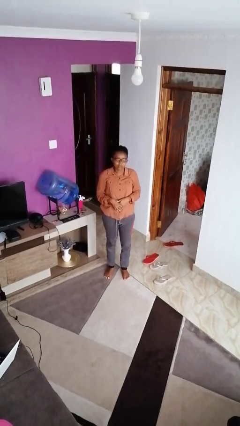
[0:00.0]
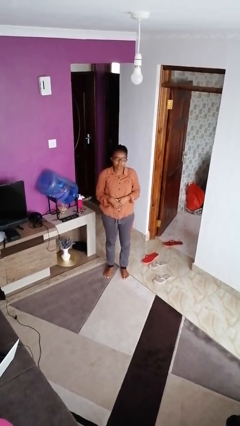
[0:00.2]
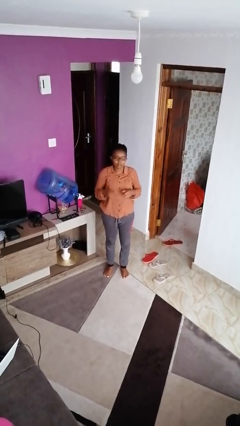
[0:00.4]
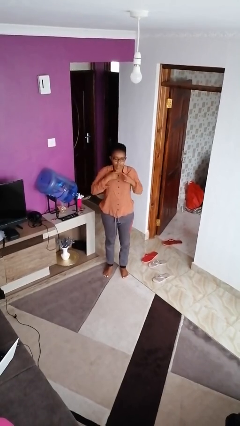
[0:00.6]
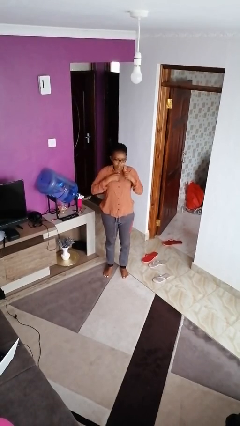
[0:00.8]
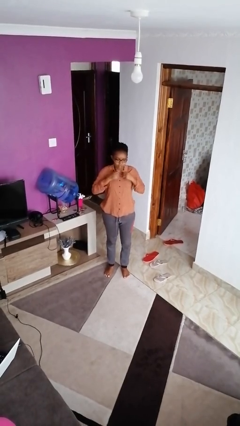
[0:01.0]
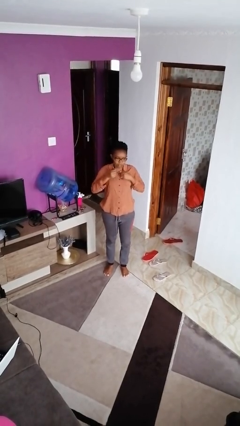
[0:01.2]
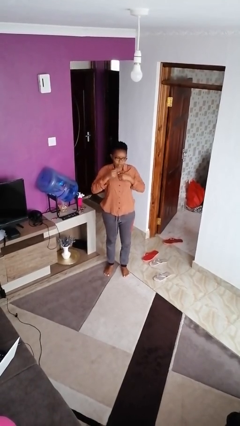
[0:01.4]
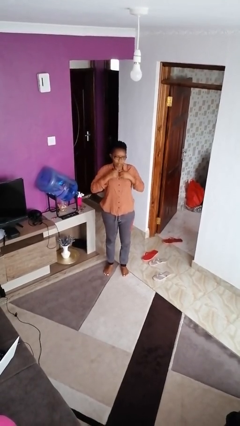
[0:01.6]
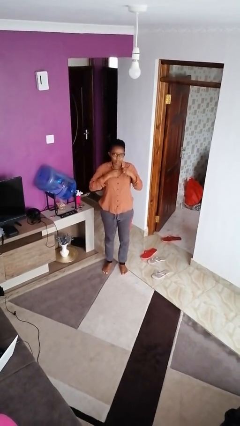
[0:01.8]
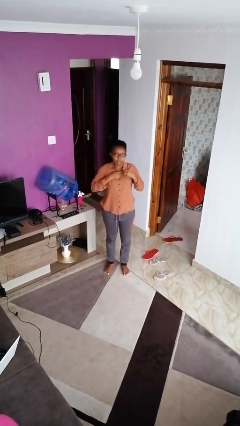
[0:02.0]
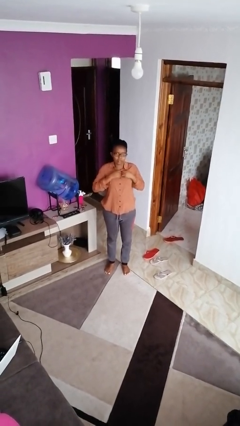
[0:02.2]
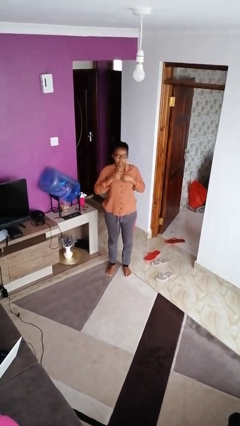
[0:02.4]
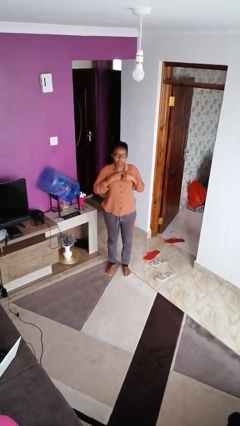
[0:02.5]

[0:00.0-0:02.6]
person drums on chest

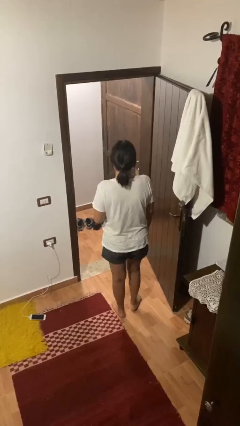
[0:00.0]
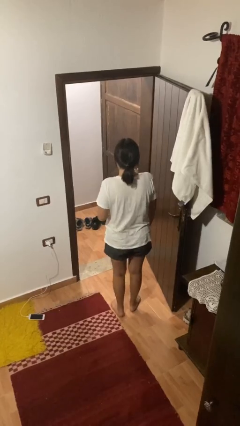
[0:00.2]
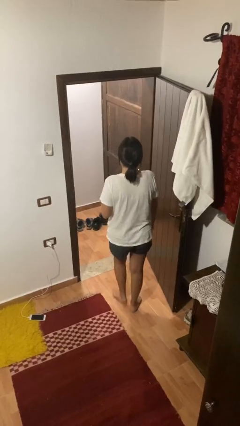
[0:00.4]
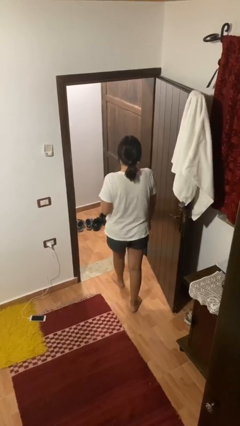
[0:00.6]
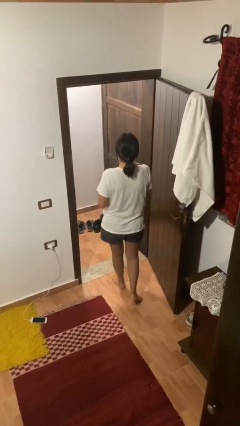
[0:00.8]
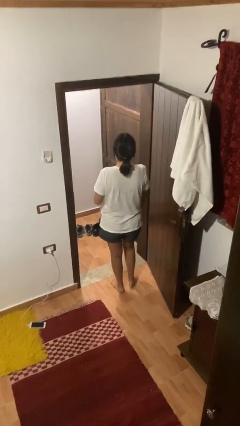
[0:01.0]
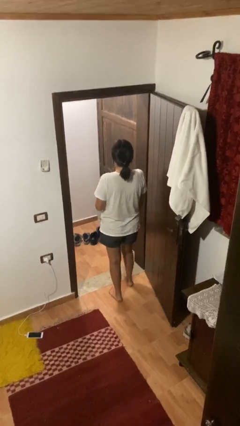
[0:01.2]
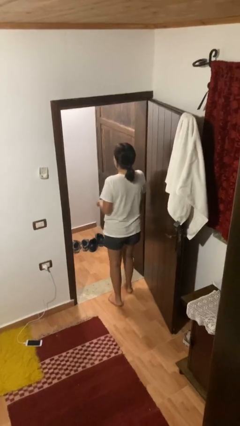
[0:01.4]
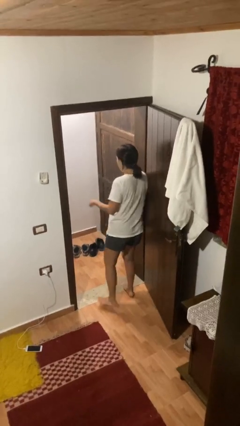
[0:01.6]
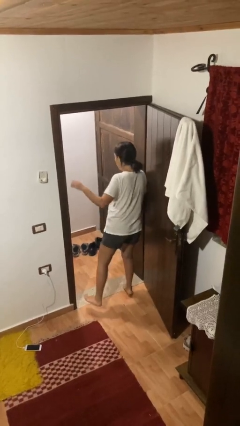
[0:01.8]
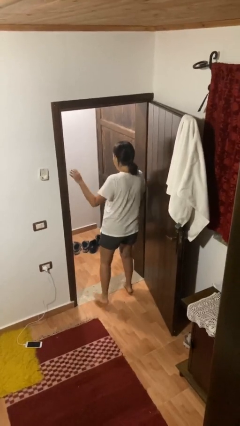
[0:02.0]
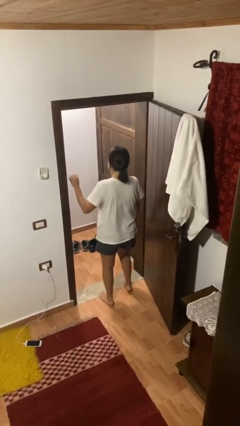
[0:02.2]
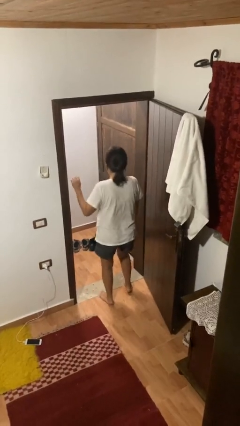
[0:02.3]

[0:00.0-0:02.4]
person bumps into wall

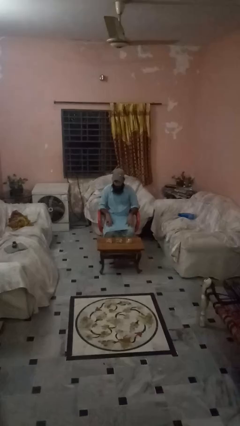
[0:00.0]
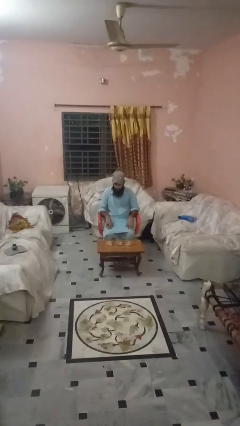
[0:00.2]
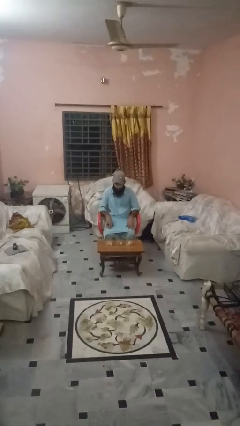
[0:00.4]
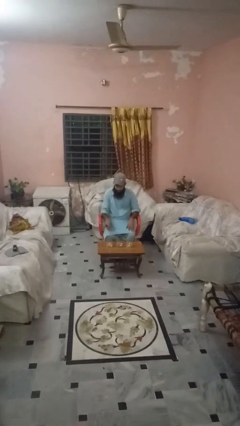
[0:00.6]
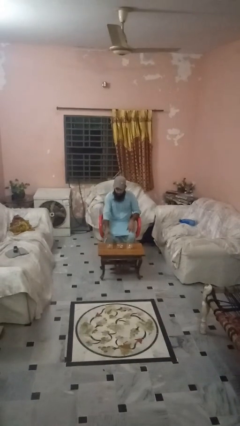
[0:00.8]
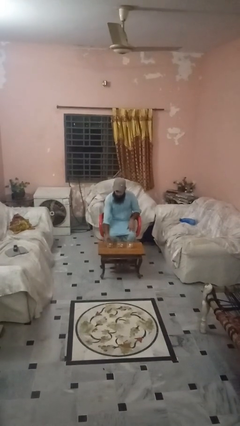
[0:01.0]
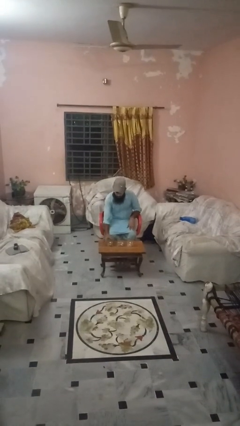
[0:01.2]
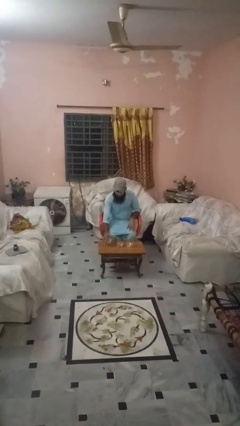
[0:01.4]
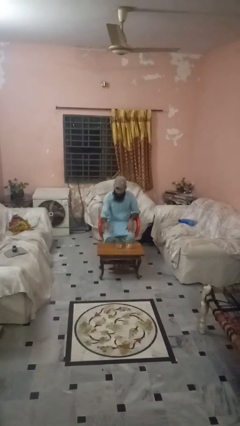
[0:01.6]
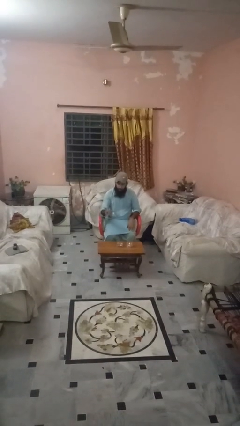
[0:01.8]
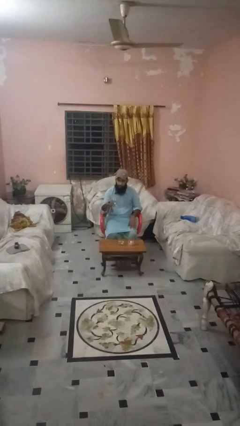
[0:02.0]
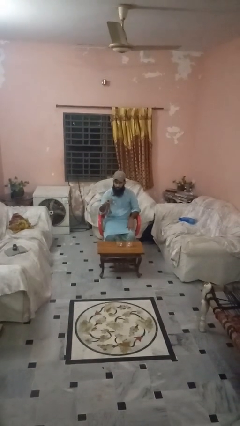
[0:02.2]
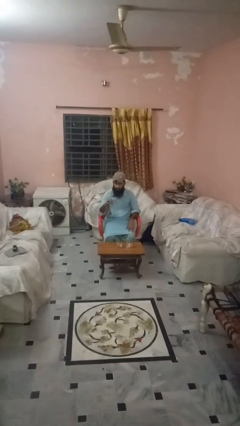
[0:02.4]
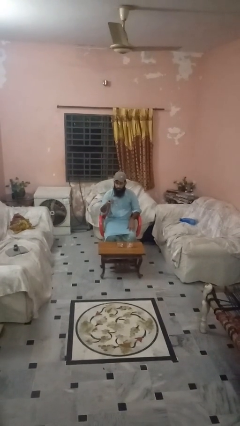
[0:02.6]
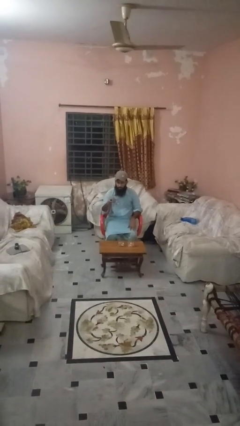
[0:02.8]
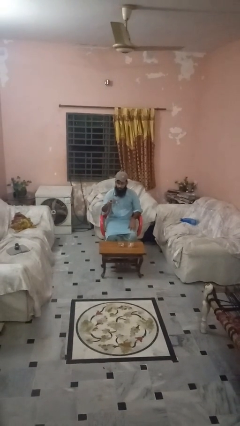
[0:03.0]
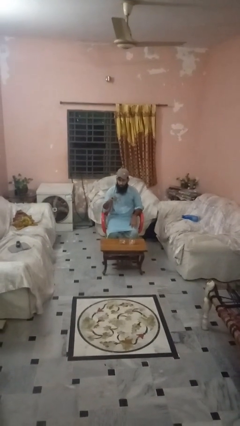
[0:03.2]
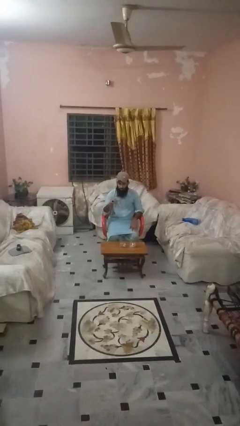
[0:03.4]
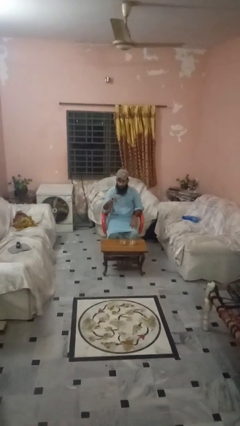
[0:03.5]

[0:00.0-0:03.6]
person picks up object from table

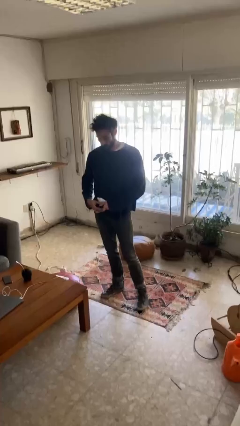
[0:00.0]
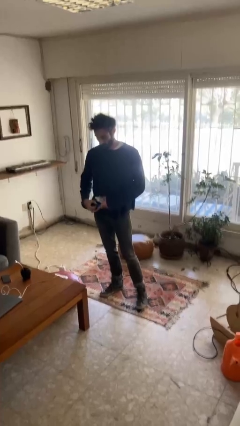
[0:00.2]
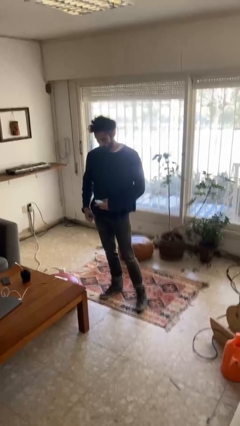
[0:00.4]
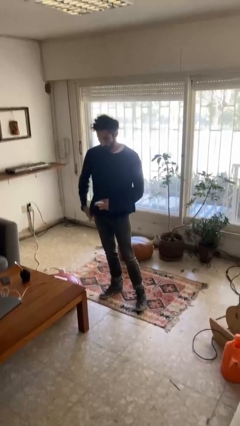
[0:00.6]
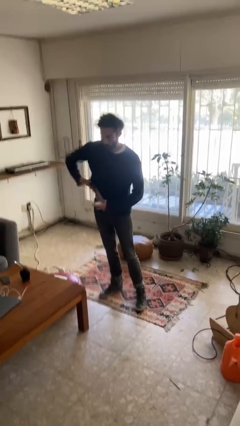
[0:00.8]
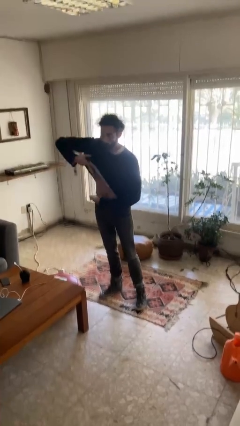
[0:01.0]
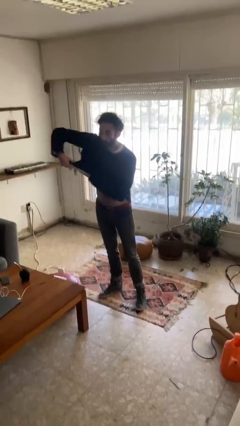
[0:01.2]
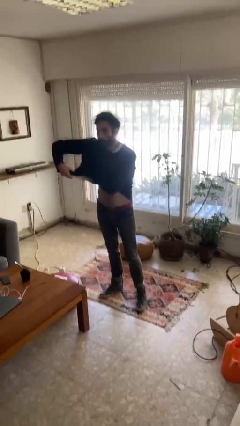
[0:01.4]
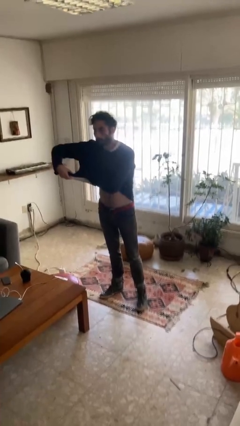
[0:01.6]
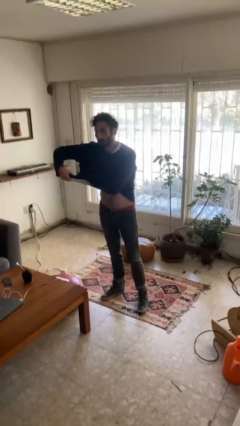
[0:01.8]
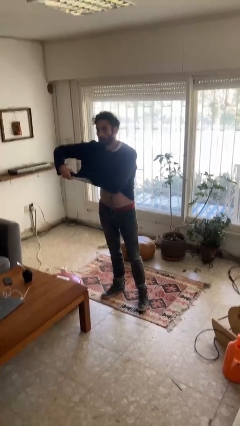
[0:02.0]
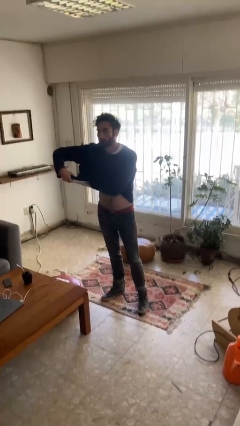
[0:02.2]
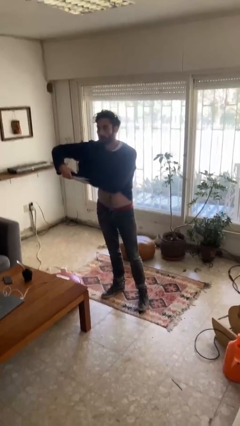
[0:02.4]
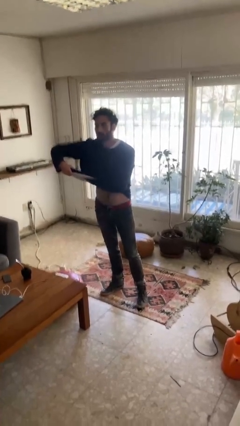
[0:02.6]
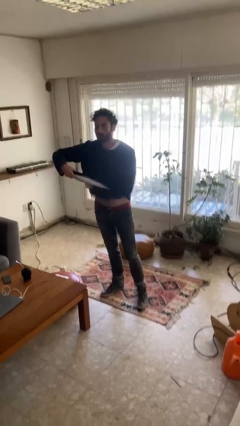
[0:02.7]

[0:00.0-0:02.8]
person applies deodorant

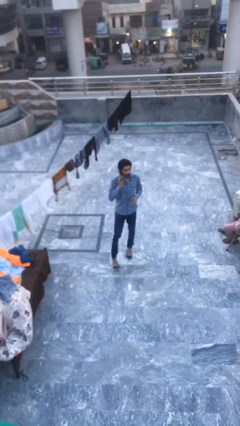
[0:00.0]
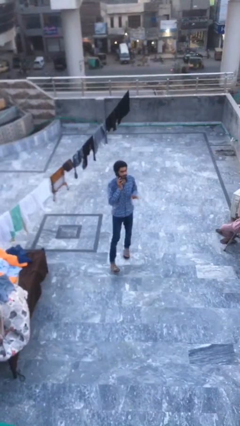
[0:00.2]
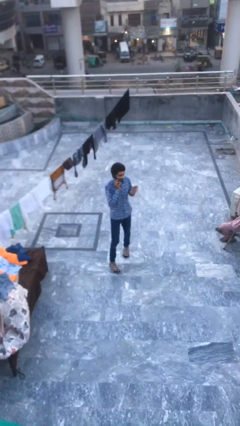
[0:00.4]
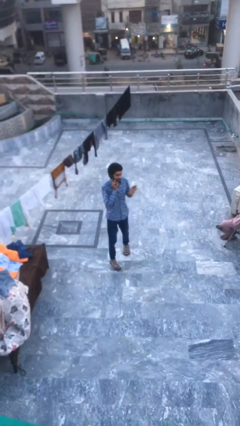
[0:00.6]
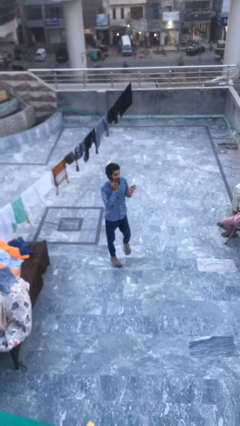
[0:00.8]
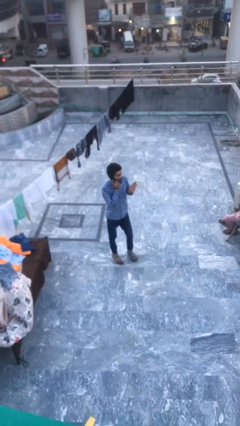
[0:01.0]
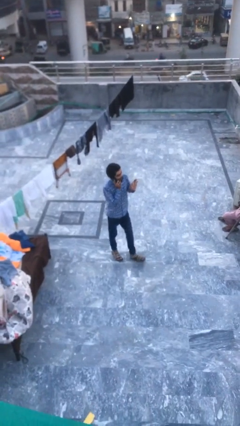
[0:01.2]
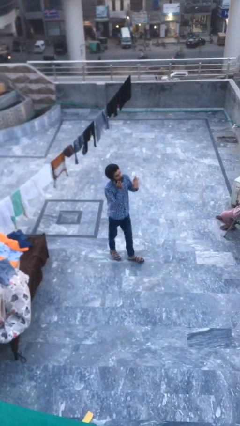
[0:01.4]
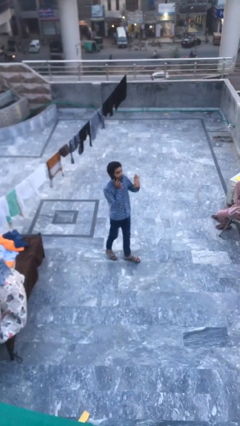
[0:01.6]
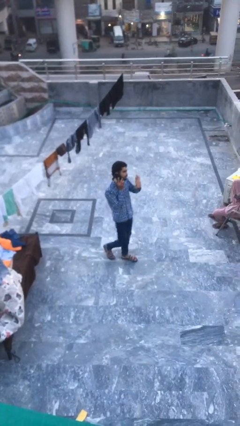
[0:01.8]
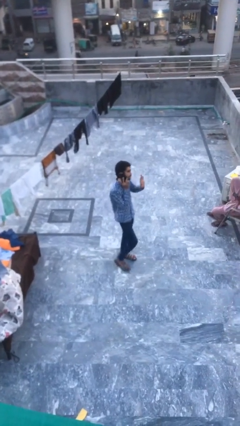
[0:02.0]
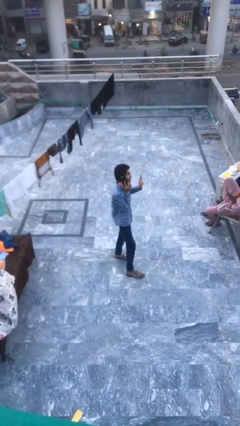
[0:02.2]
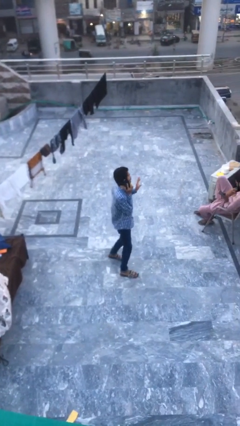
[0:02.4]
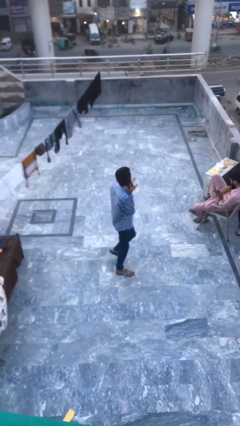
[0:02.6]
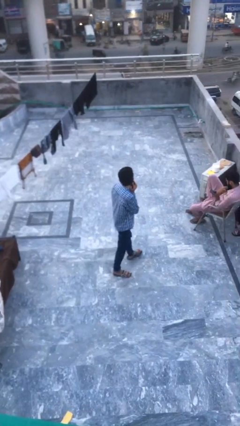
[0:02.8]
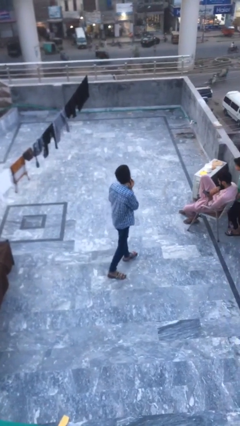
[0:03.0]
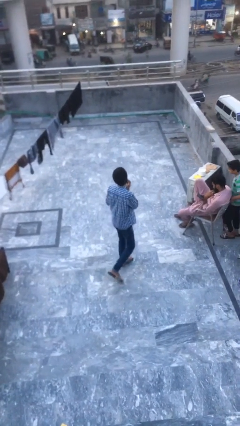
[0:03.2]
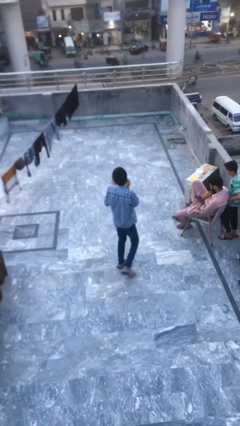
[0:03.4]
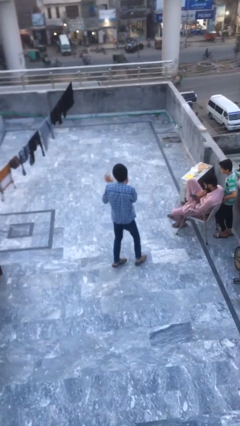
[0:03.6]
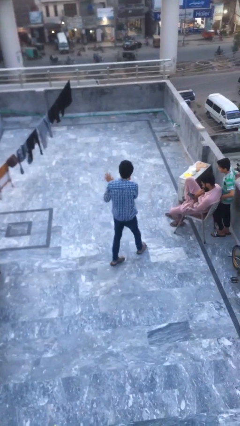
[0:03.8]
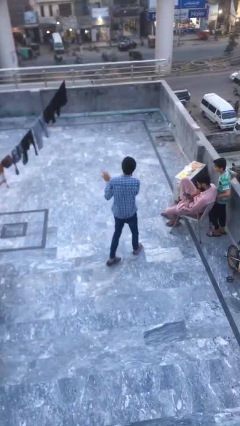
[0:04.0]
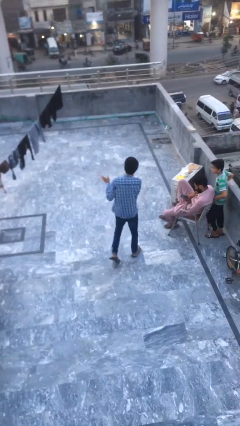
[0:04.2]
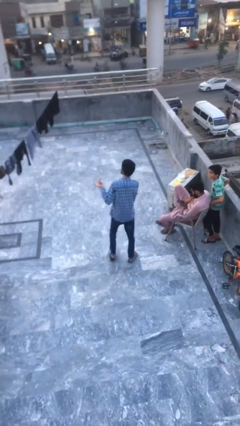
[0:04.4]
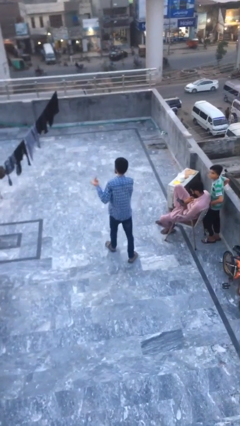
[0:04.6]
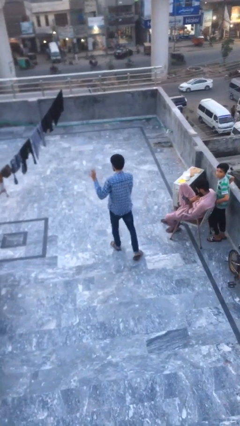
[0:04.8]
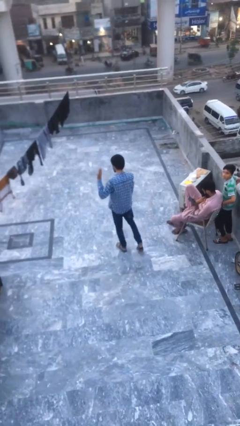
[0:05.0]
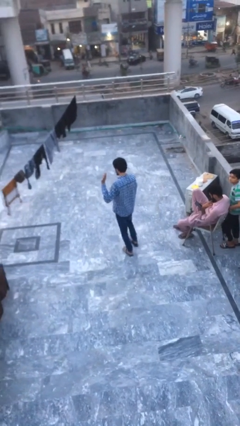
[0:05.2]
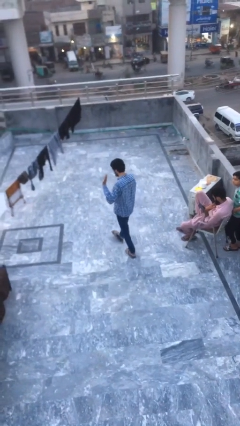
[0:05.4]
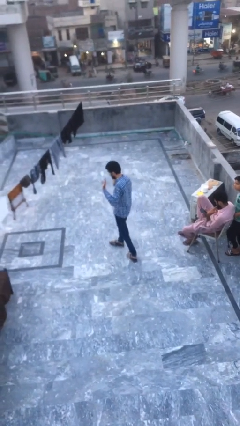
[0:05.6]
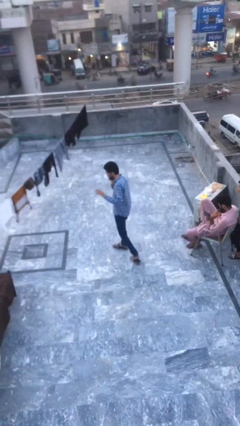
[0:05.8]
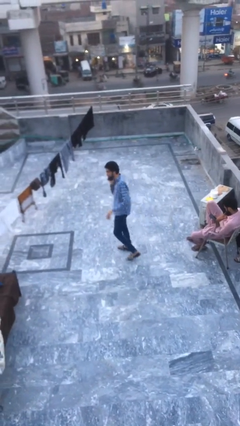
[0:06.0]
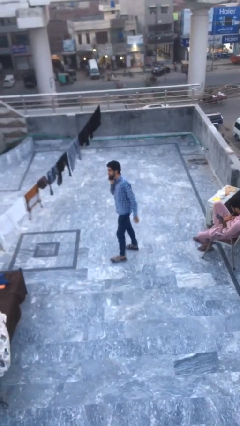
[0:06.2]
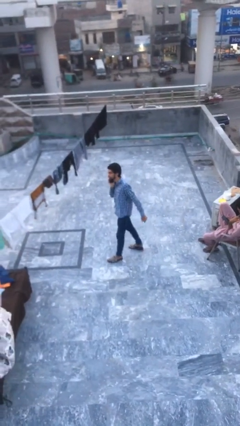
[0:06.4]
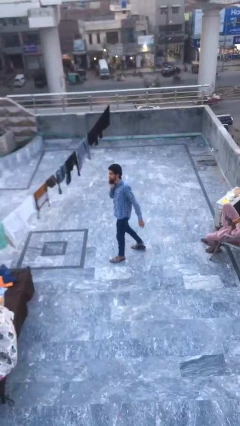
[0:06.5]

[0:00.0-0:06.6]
person talks on phone
